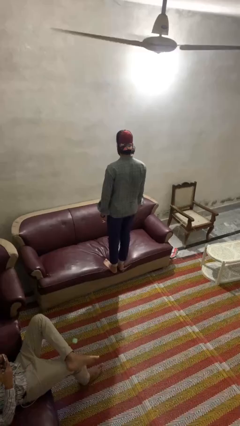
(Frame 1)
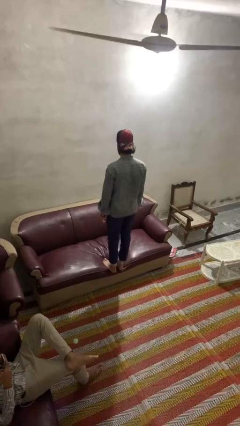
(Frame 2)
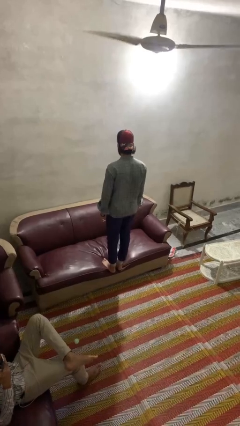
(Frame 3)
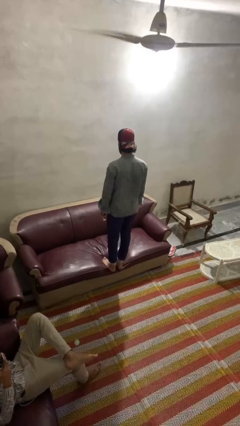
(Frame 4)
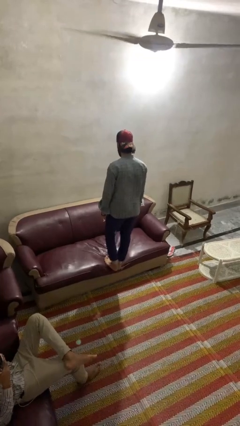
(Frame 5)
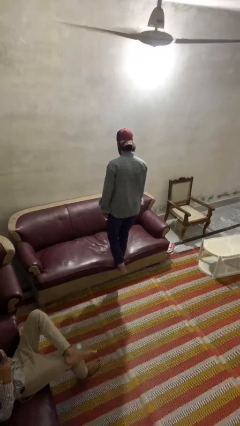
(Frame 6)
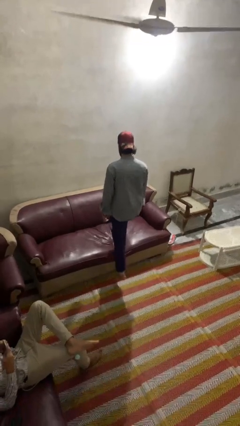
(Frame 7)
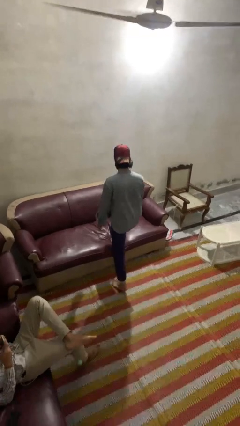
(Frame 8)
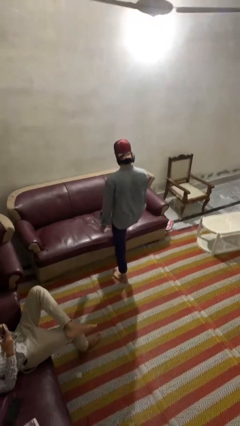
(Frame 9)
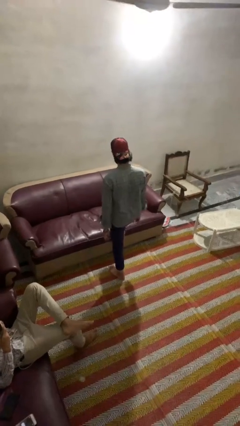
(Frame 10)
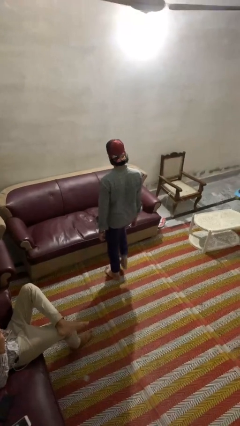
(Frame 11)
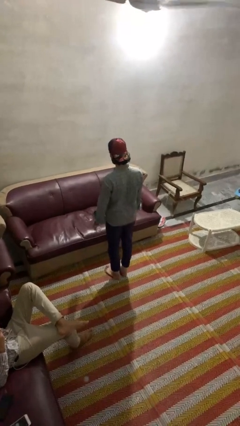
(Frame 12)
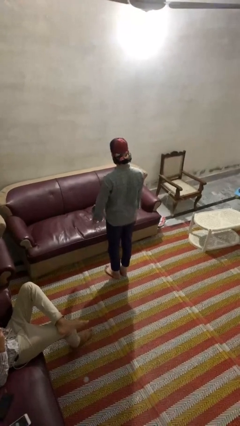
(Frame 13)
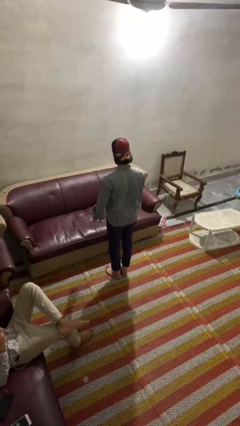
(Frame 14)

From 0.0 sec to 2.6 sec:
person climbs off couch

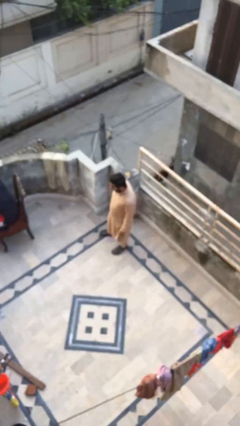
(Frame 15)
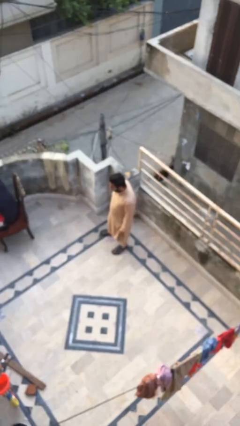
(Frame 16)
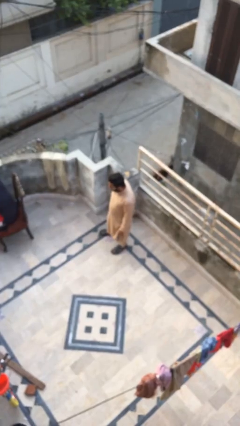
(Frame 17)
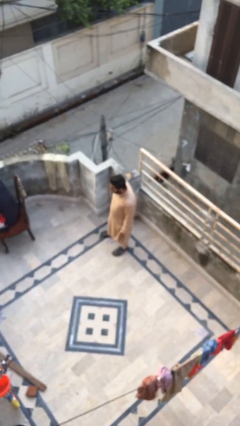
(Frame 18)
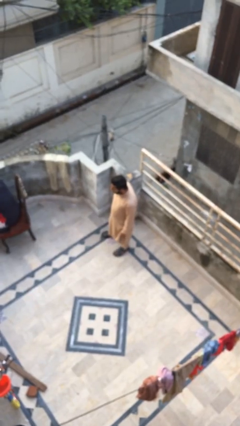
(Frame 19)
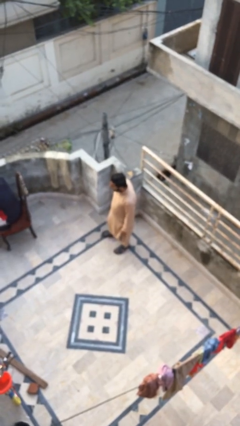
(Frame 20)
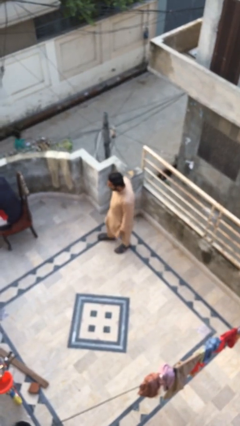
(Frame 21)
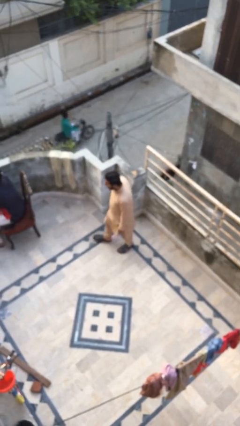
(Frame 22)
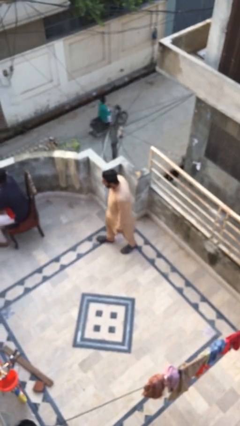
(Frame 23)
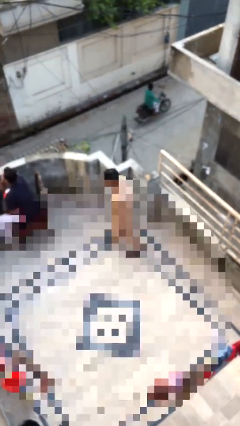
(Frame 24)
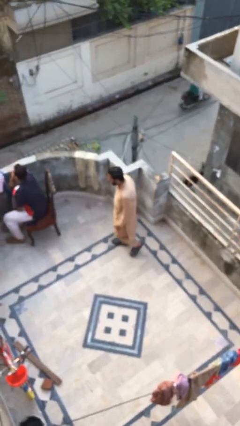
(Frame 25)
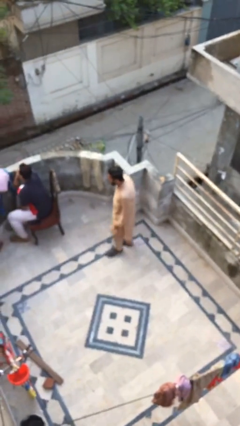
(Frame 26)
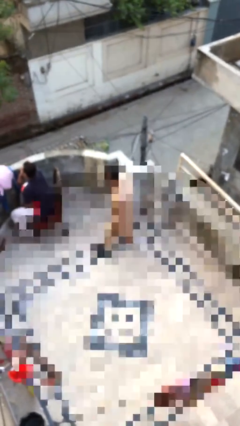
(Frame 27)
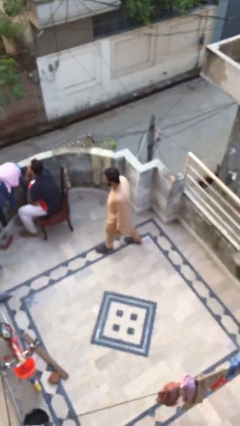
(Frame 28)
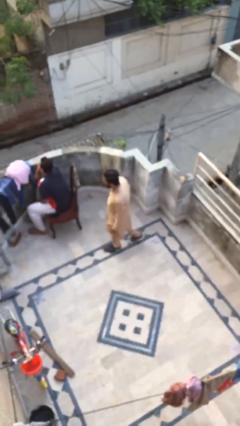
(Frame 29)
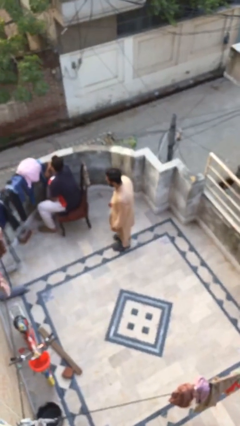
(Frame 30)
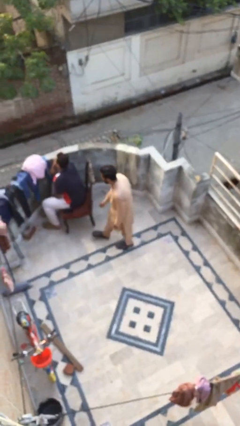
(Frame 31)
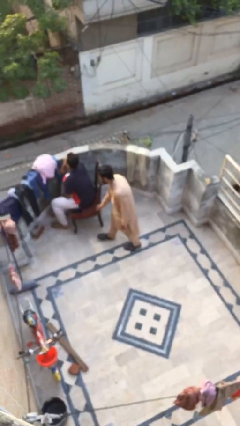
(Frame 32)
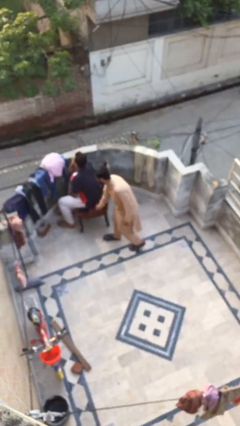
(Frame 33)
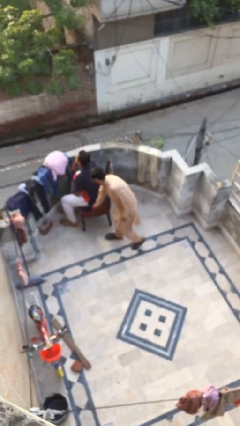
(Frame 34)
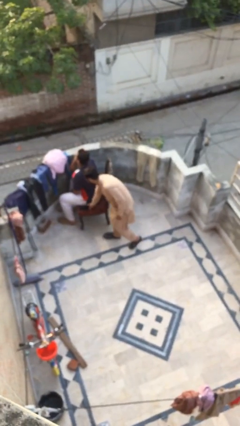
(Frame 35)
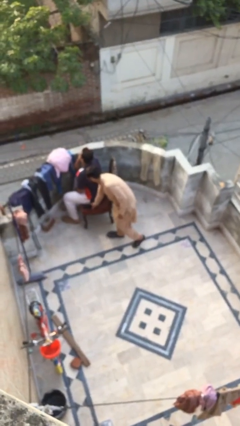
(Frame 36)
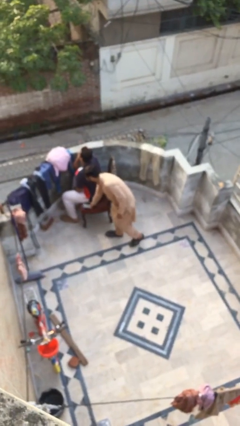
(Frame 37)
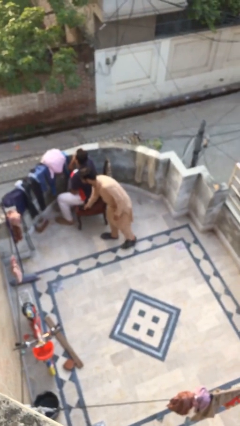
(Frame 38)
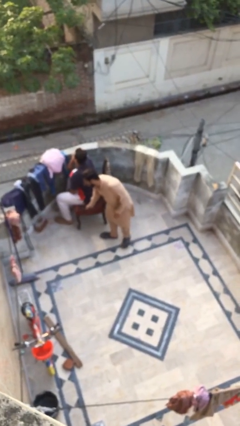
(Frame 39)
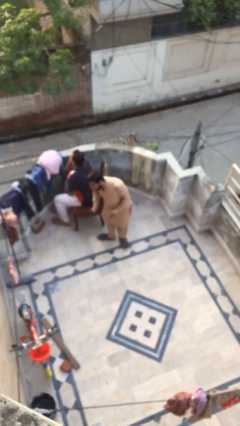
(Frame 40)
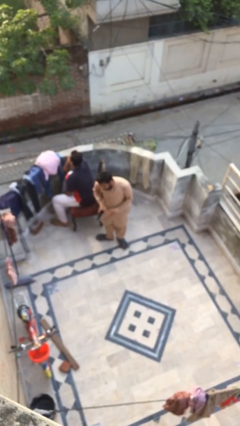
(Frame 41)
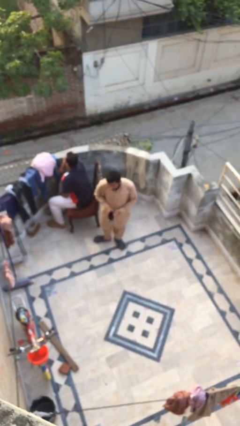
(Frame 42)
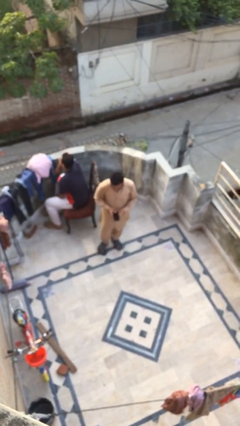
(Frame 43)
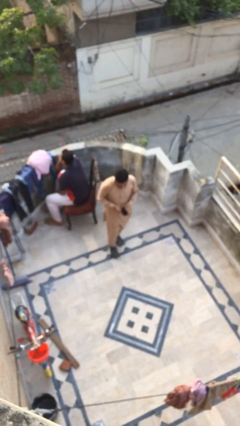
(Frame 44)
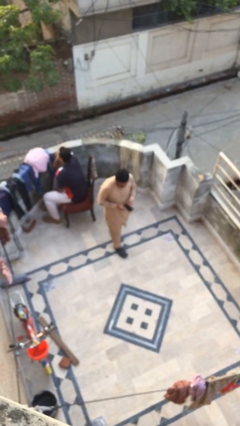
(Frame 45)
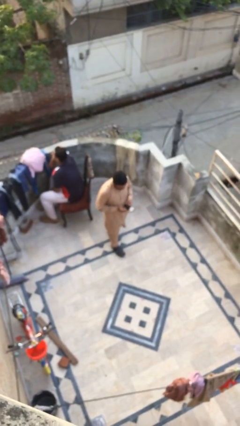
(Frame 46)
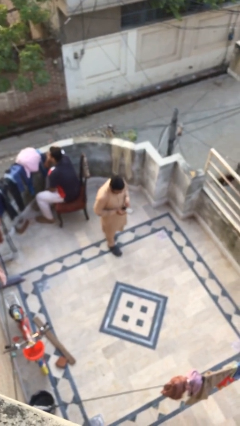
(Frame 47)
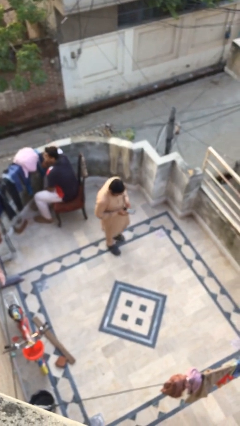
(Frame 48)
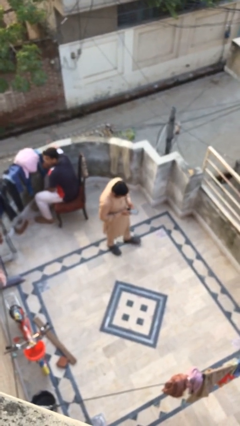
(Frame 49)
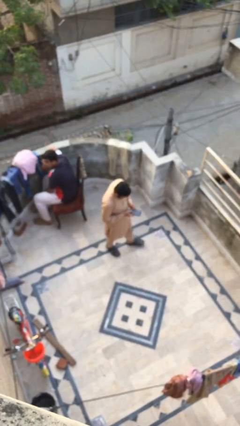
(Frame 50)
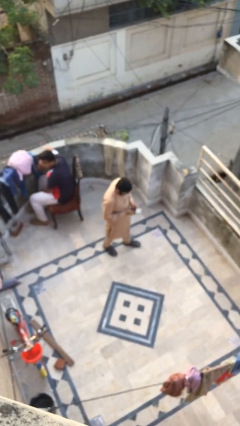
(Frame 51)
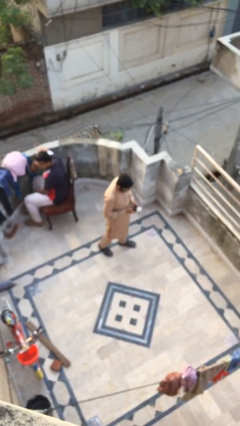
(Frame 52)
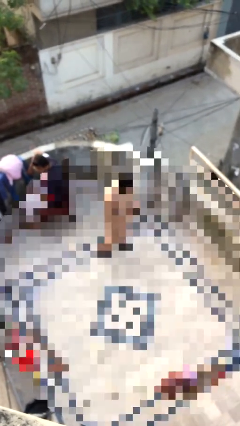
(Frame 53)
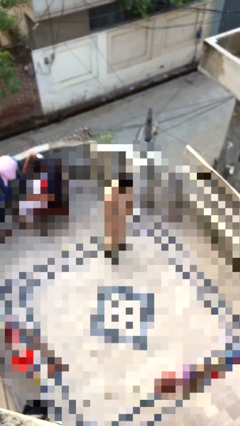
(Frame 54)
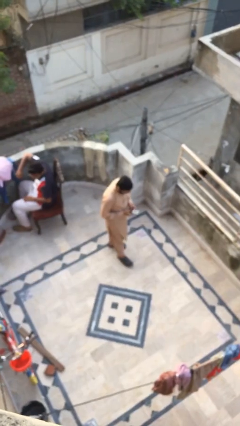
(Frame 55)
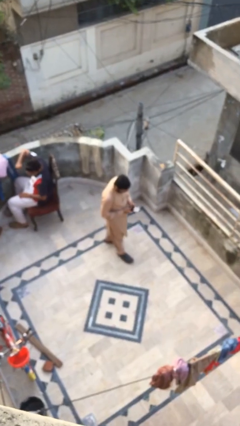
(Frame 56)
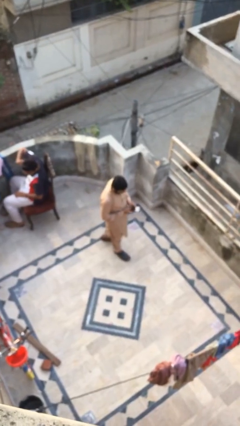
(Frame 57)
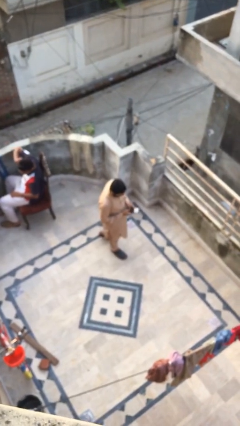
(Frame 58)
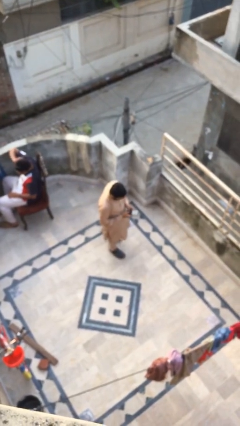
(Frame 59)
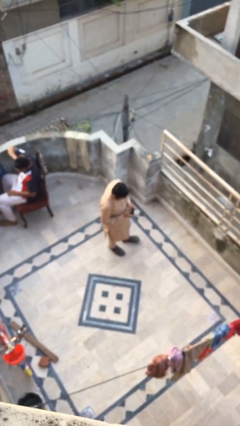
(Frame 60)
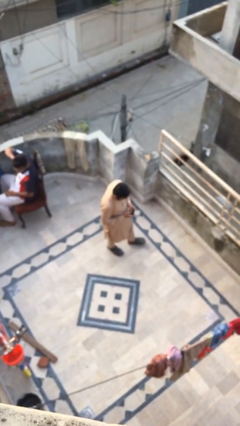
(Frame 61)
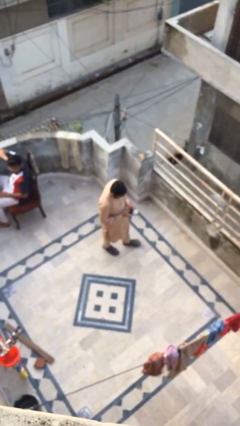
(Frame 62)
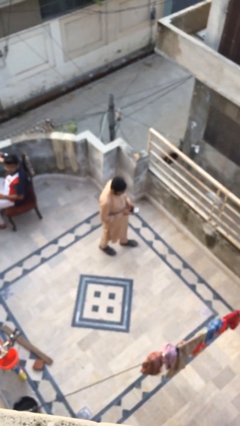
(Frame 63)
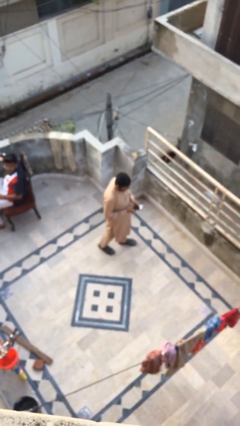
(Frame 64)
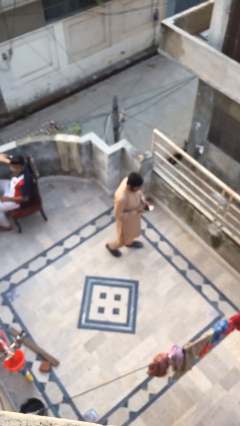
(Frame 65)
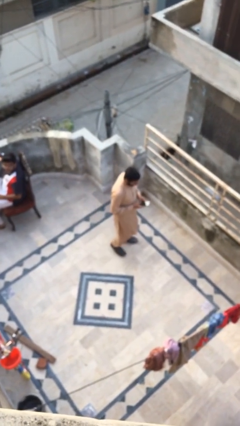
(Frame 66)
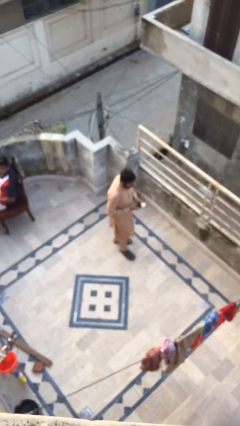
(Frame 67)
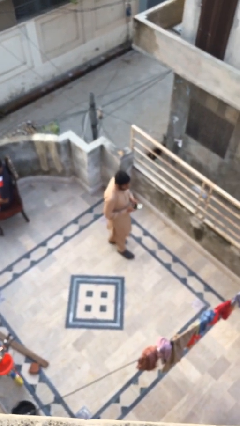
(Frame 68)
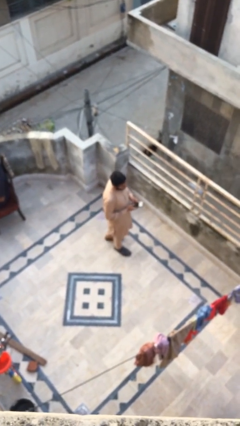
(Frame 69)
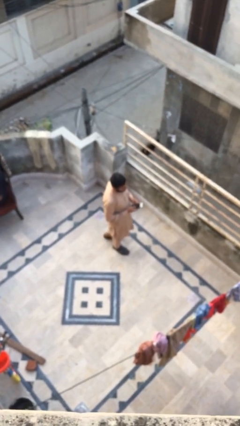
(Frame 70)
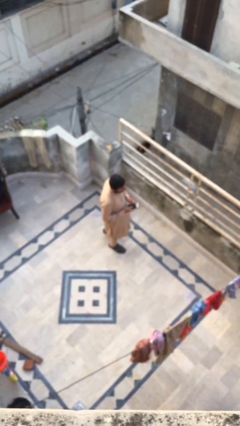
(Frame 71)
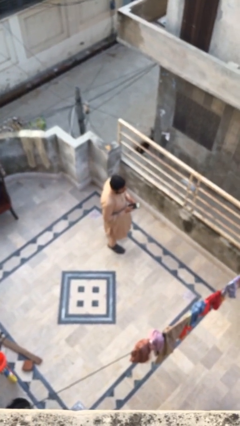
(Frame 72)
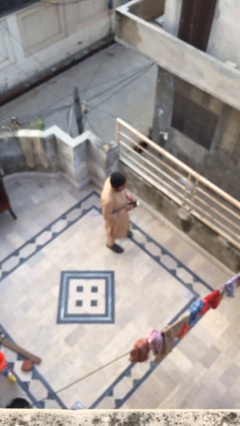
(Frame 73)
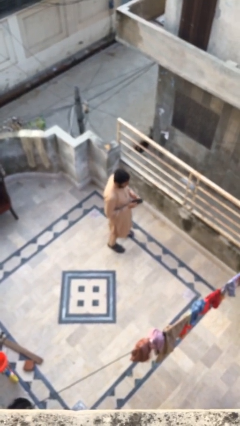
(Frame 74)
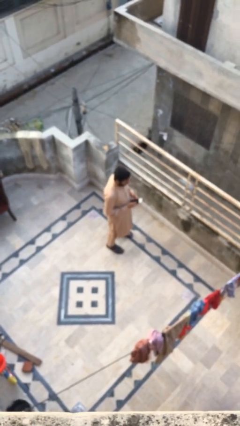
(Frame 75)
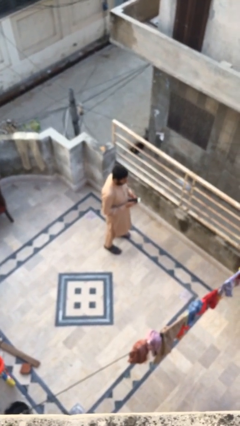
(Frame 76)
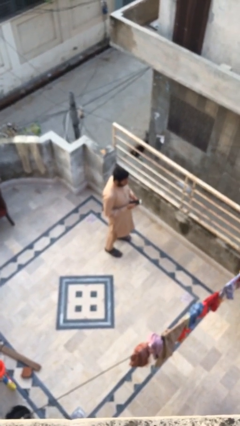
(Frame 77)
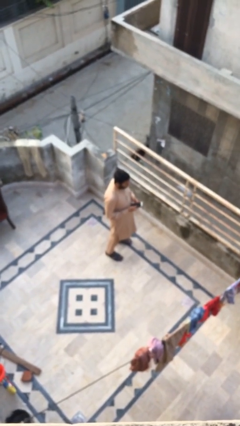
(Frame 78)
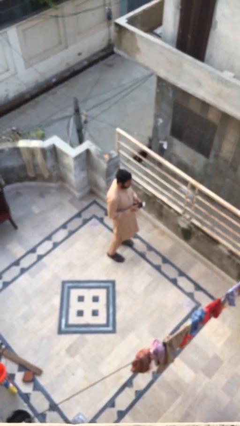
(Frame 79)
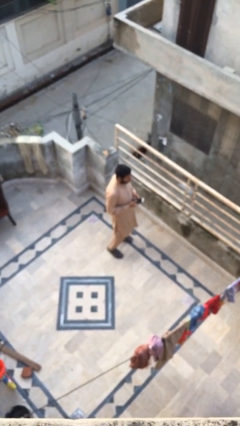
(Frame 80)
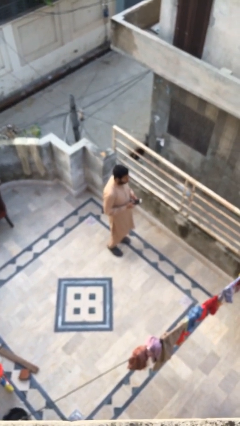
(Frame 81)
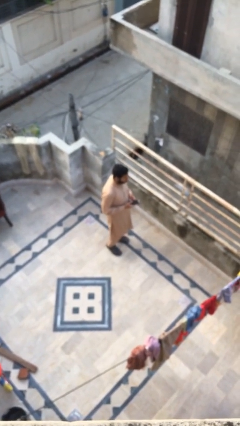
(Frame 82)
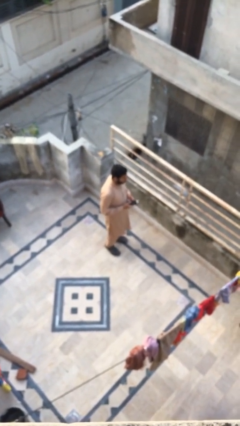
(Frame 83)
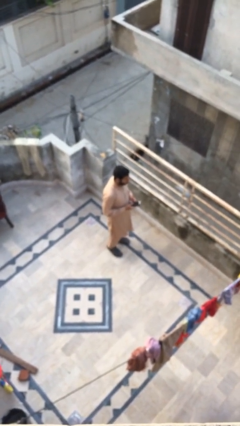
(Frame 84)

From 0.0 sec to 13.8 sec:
person steals object from person

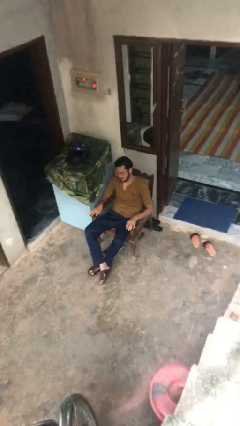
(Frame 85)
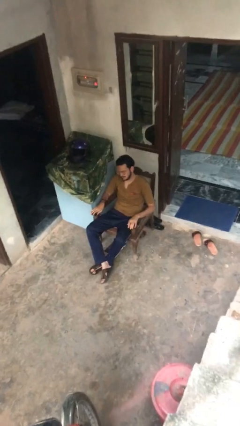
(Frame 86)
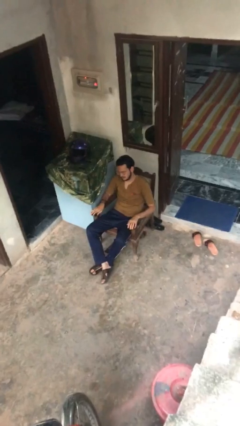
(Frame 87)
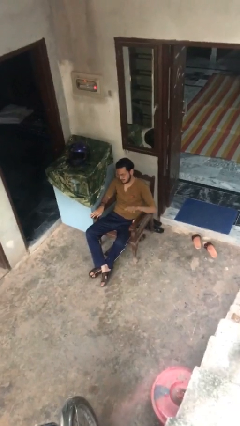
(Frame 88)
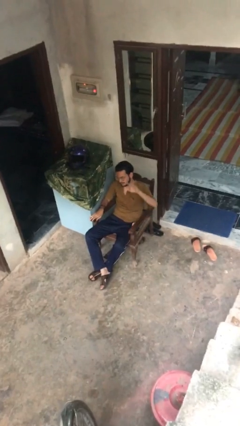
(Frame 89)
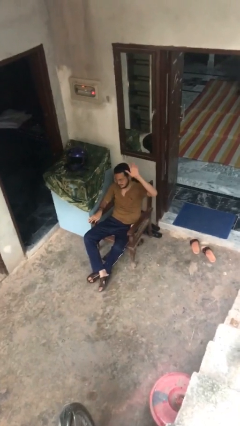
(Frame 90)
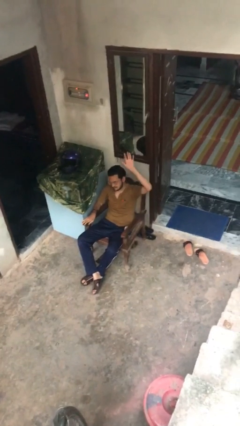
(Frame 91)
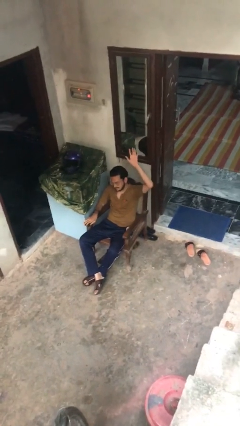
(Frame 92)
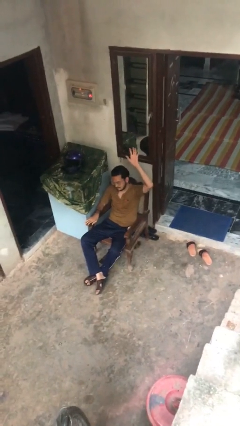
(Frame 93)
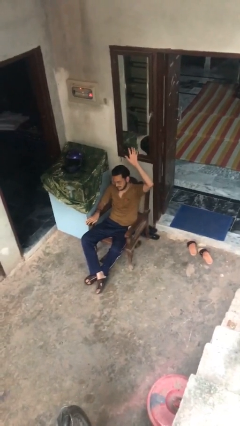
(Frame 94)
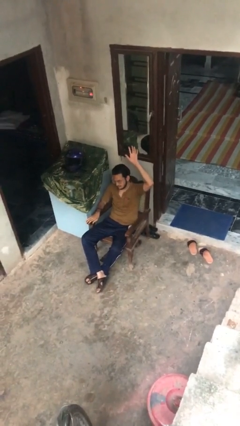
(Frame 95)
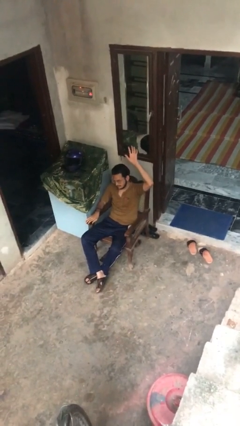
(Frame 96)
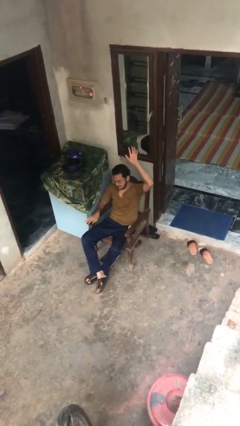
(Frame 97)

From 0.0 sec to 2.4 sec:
person gestures raise hand
